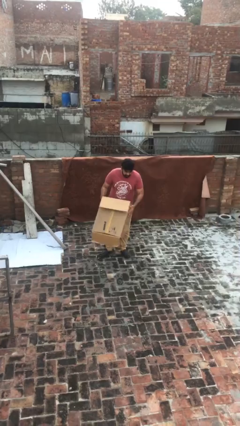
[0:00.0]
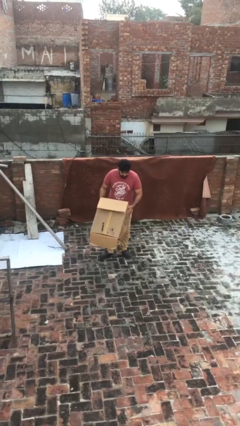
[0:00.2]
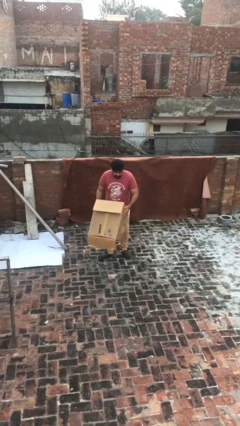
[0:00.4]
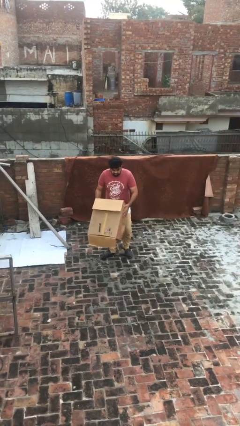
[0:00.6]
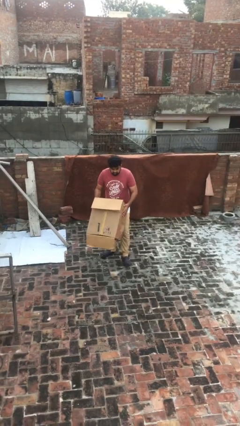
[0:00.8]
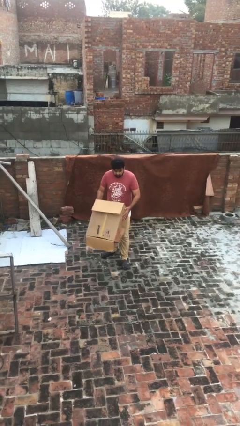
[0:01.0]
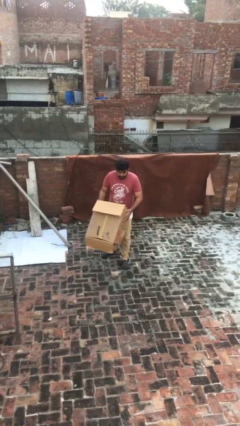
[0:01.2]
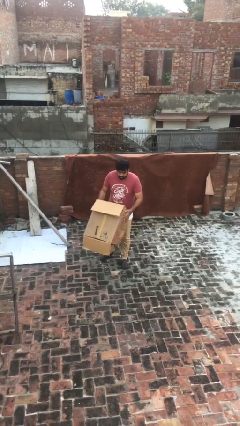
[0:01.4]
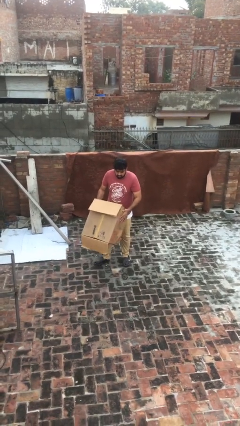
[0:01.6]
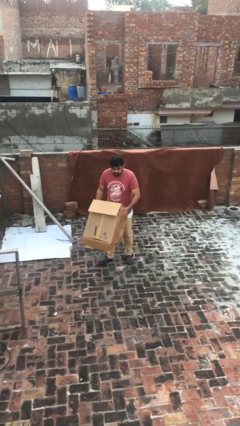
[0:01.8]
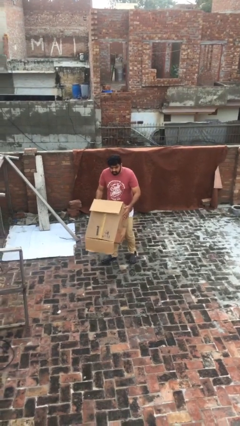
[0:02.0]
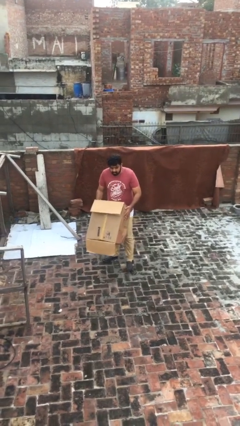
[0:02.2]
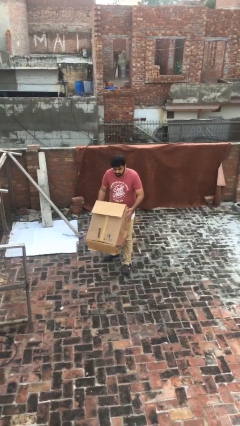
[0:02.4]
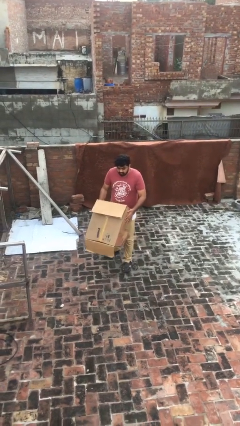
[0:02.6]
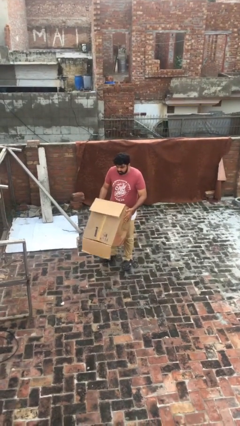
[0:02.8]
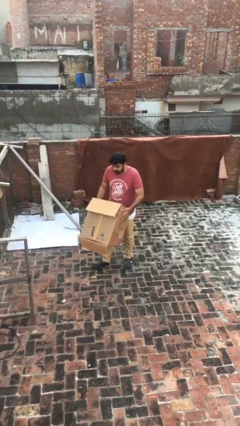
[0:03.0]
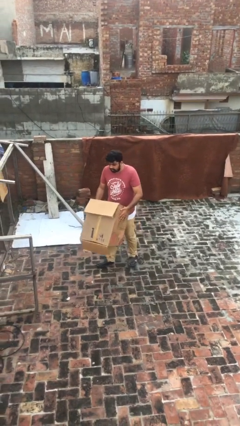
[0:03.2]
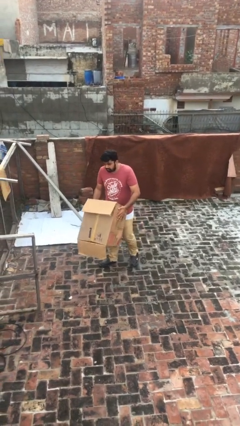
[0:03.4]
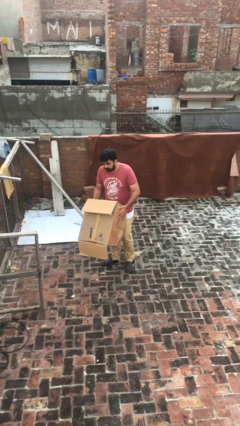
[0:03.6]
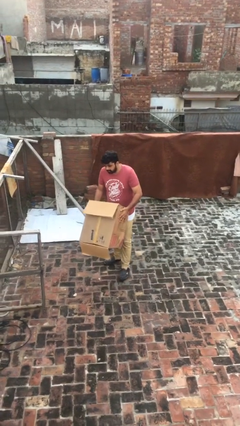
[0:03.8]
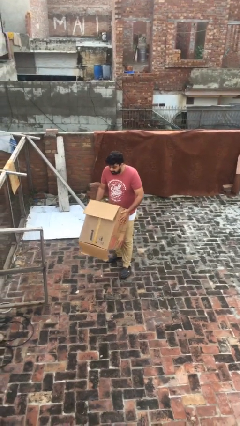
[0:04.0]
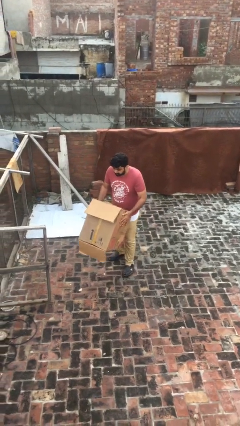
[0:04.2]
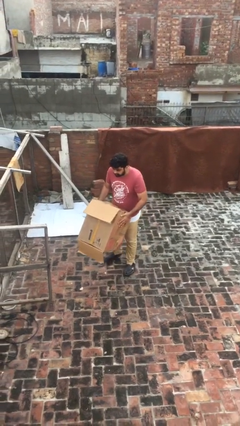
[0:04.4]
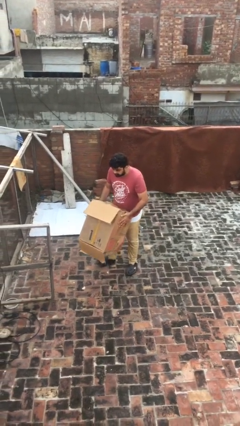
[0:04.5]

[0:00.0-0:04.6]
person carries heavy object

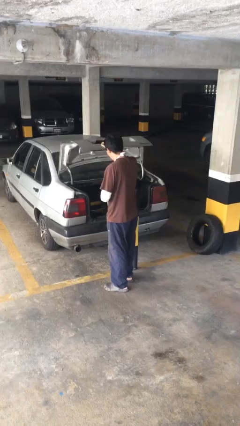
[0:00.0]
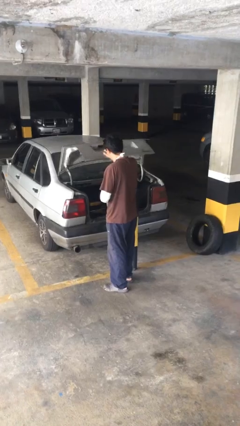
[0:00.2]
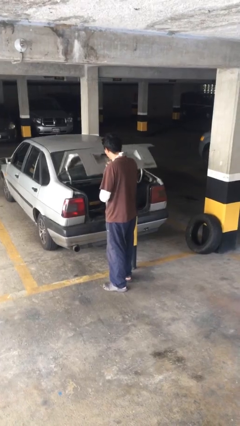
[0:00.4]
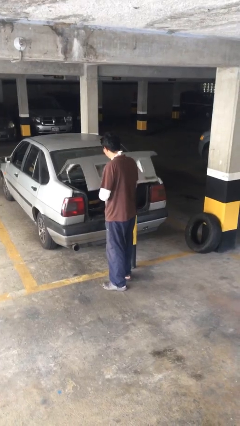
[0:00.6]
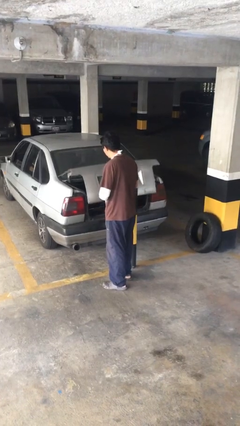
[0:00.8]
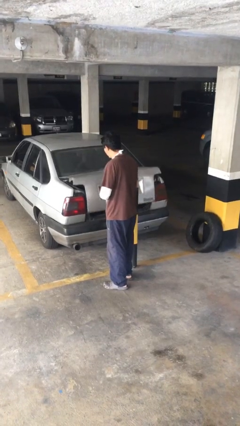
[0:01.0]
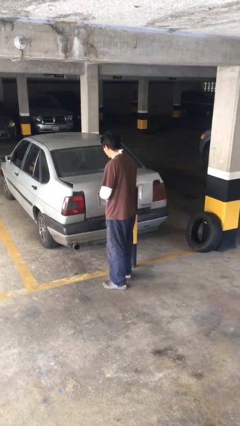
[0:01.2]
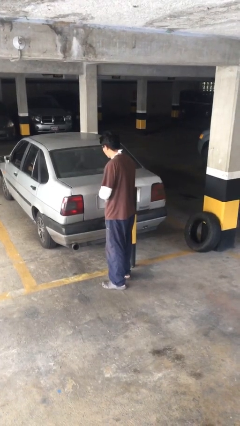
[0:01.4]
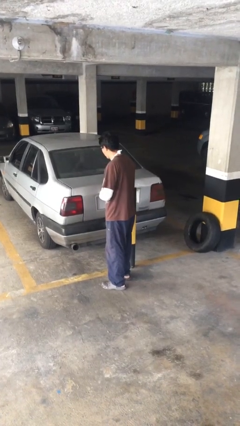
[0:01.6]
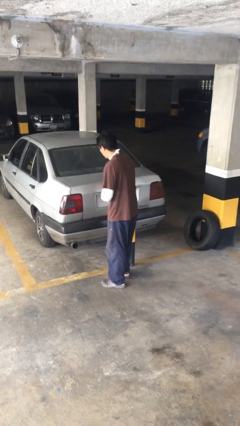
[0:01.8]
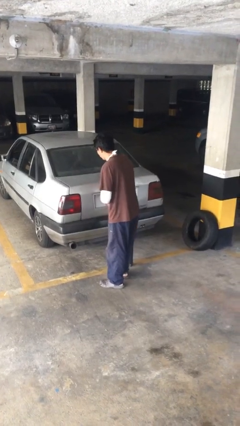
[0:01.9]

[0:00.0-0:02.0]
person closes car trunk

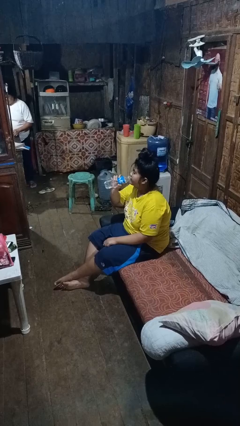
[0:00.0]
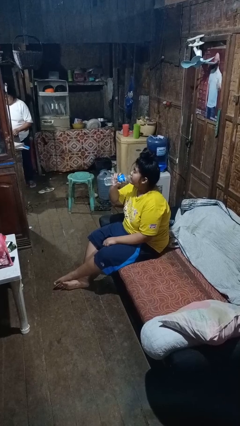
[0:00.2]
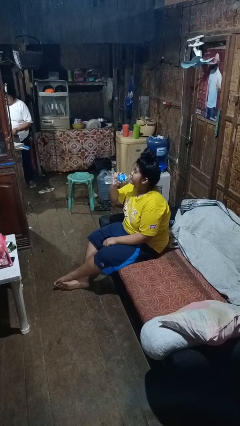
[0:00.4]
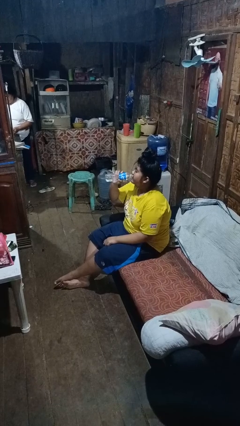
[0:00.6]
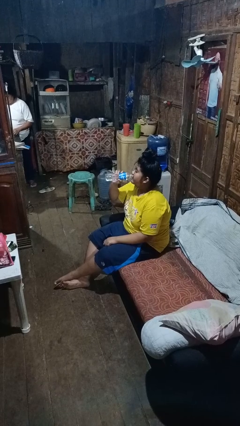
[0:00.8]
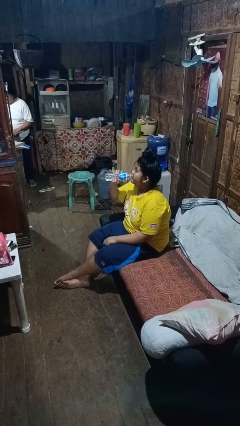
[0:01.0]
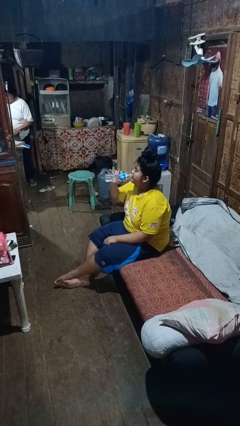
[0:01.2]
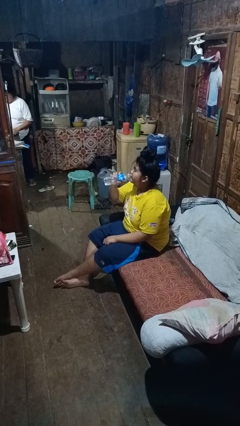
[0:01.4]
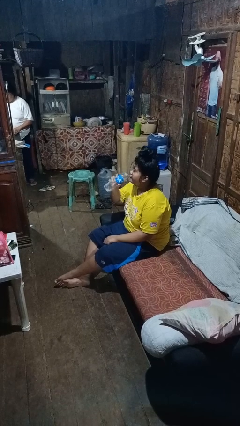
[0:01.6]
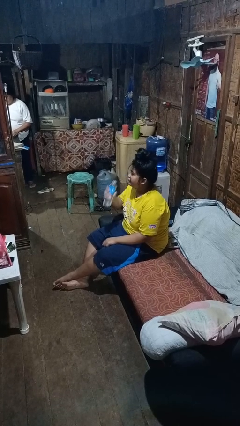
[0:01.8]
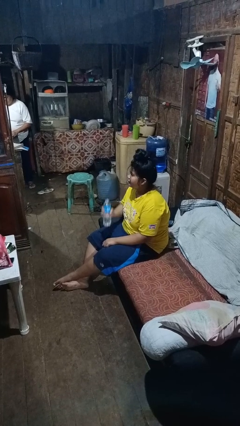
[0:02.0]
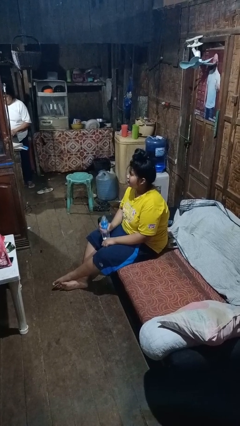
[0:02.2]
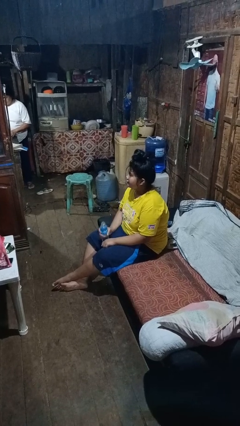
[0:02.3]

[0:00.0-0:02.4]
person drinks from bottle

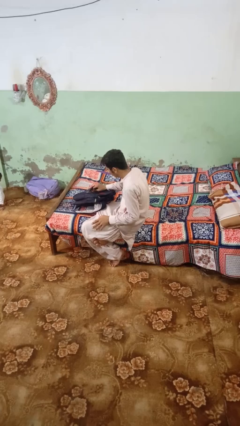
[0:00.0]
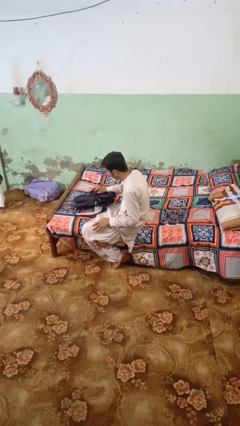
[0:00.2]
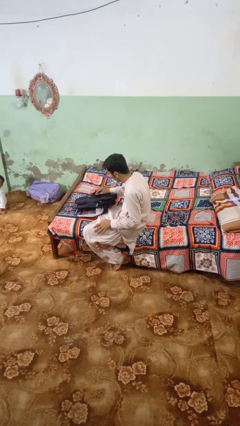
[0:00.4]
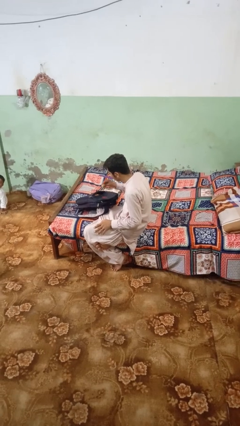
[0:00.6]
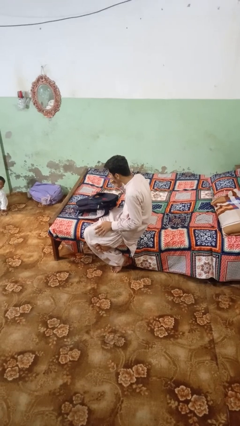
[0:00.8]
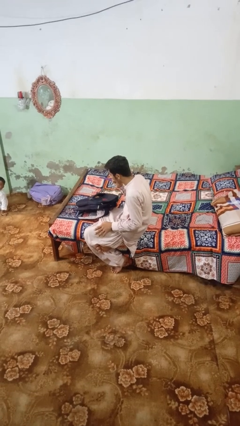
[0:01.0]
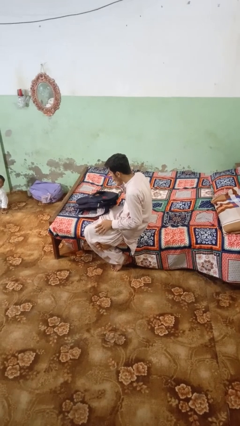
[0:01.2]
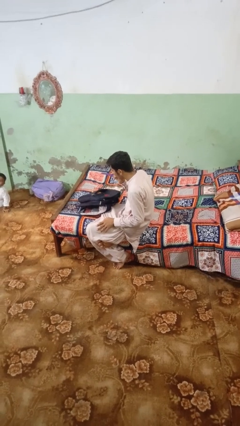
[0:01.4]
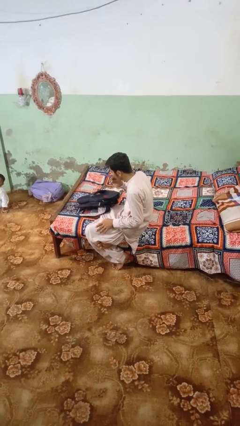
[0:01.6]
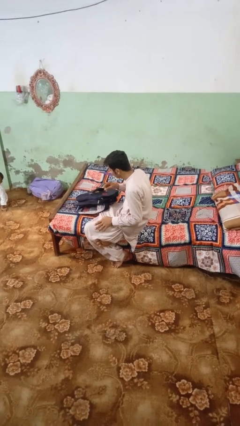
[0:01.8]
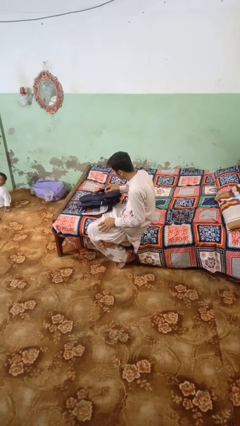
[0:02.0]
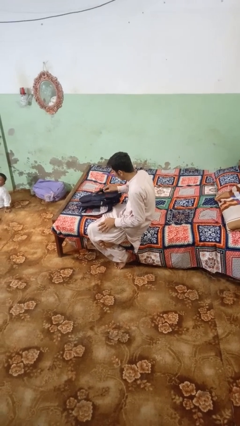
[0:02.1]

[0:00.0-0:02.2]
person eats snack from bag

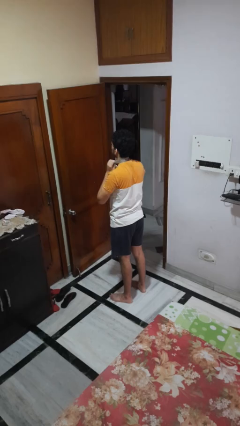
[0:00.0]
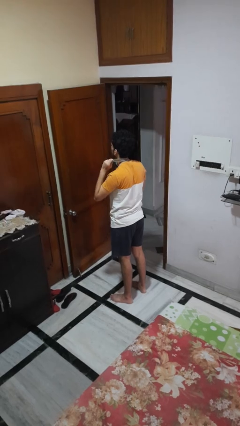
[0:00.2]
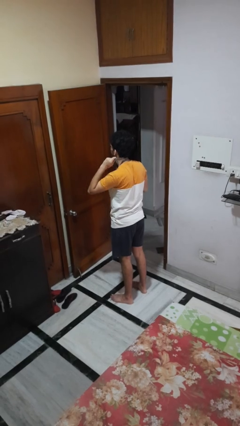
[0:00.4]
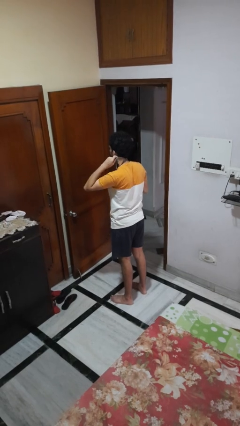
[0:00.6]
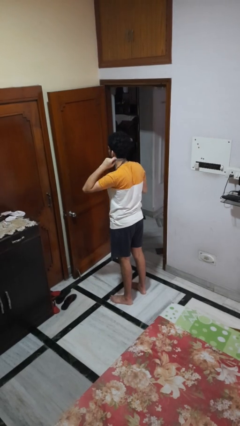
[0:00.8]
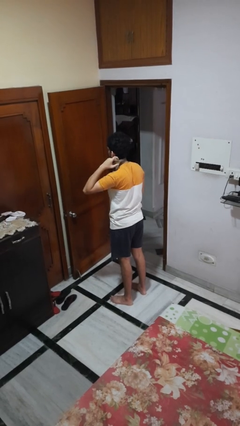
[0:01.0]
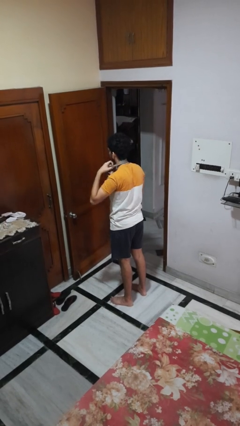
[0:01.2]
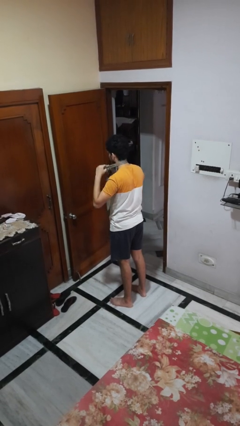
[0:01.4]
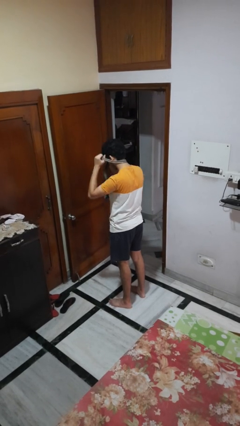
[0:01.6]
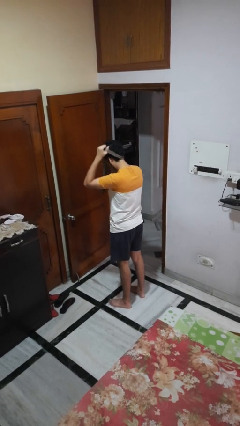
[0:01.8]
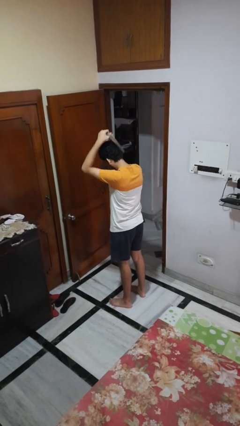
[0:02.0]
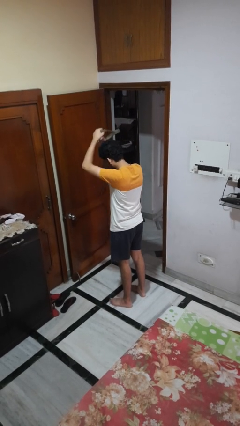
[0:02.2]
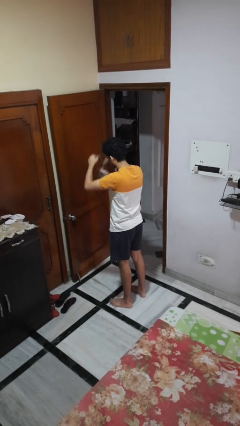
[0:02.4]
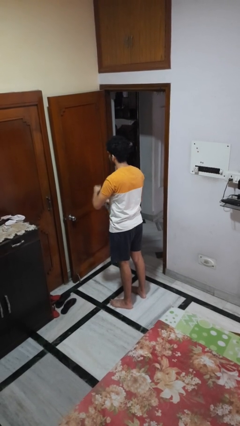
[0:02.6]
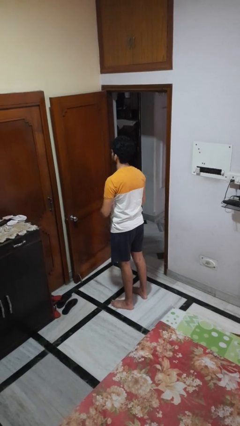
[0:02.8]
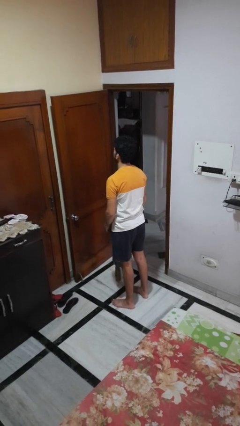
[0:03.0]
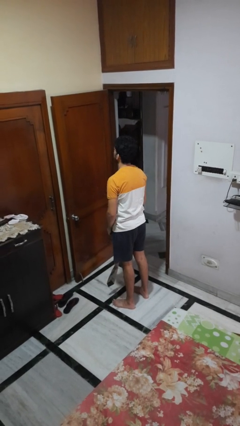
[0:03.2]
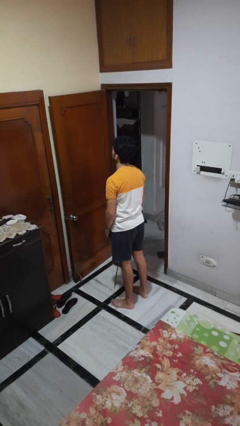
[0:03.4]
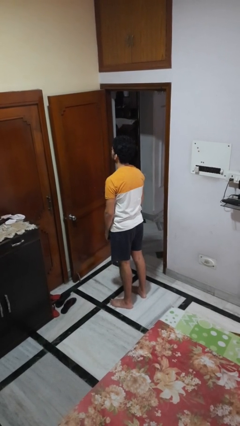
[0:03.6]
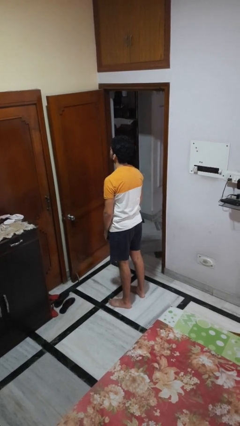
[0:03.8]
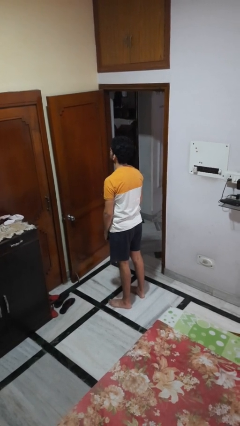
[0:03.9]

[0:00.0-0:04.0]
person takes off necktie

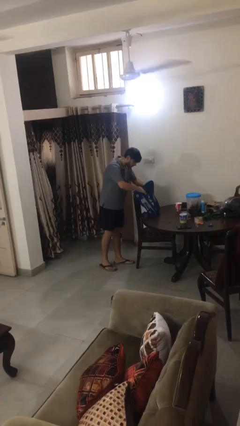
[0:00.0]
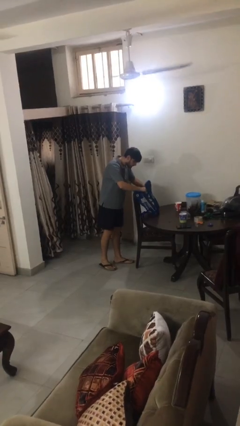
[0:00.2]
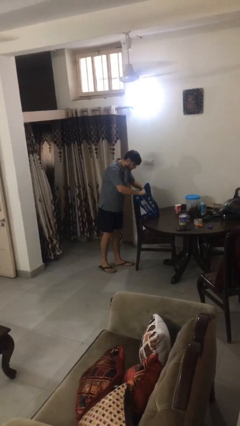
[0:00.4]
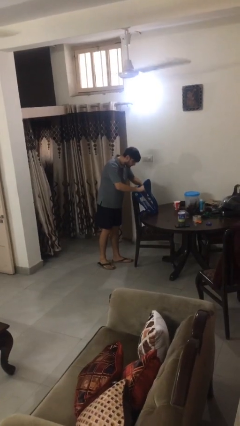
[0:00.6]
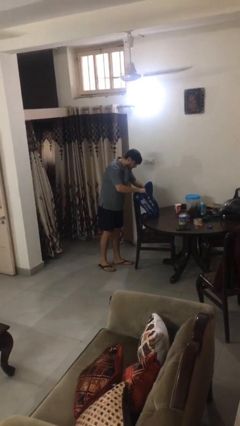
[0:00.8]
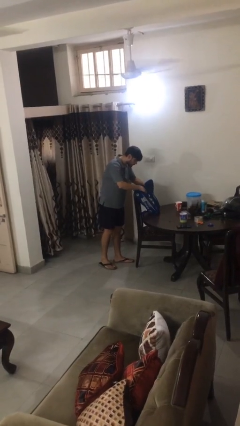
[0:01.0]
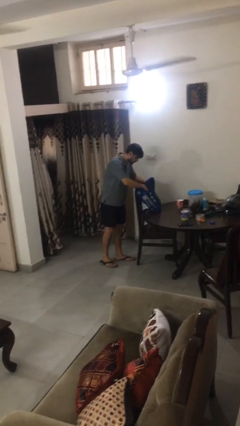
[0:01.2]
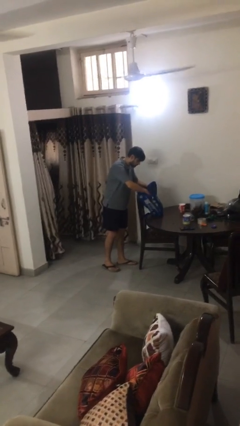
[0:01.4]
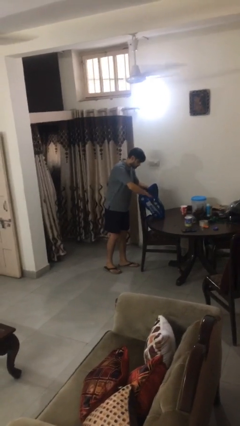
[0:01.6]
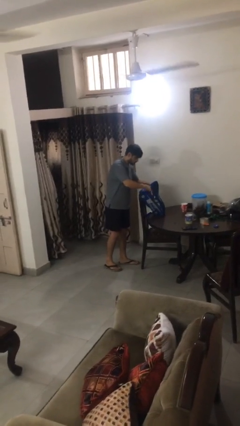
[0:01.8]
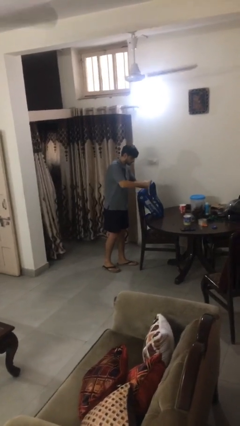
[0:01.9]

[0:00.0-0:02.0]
person takes object from backpack

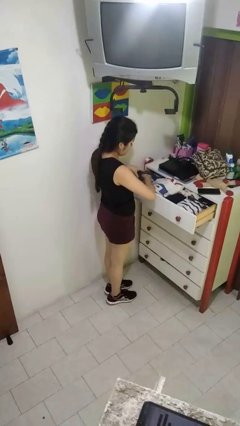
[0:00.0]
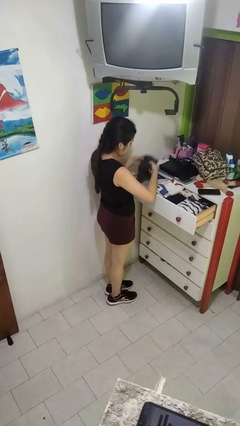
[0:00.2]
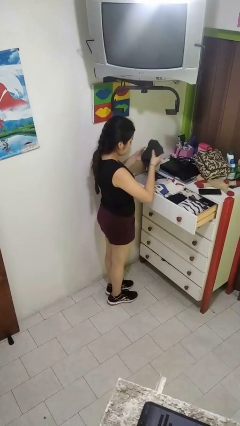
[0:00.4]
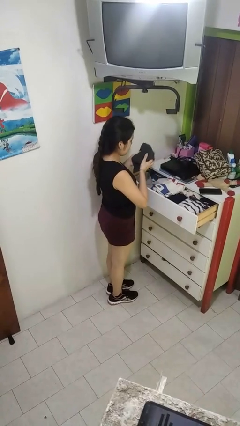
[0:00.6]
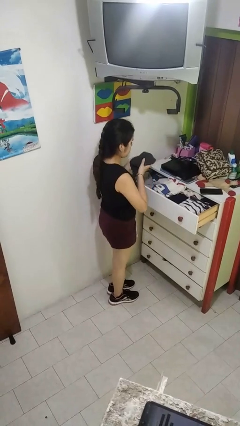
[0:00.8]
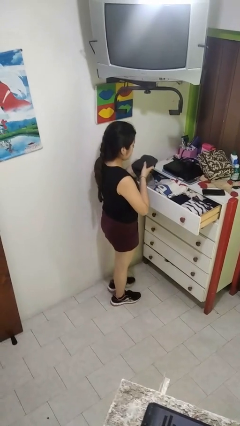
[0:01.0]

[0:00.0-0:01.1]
person takes clothes from dresser
